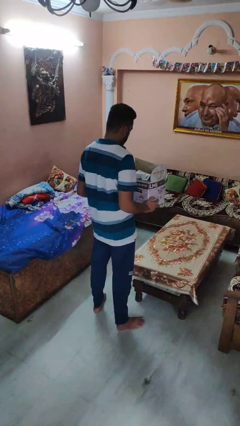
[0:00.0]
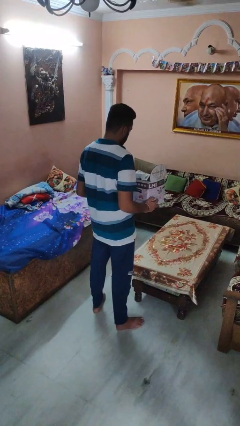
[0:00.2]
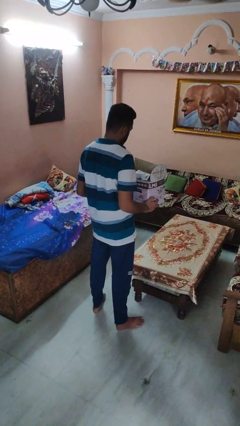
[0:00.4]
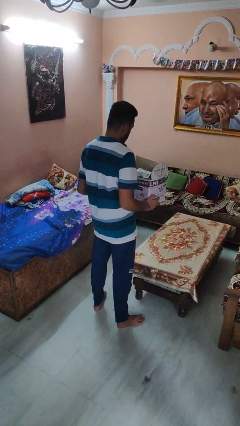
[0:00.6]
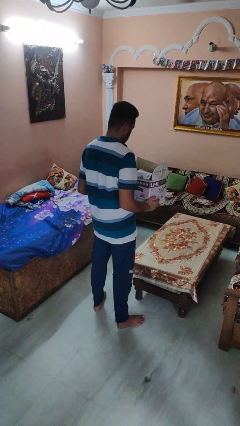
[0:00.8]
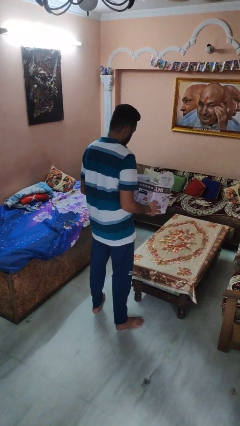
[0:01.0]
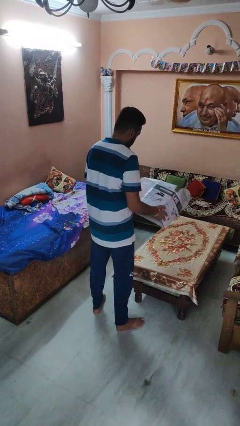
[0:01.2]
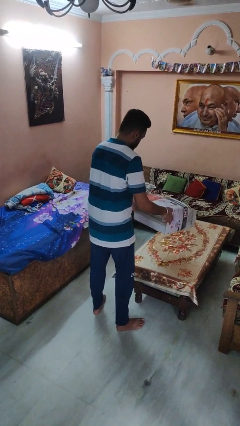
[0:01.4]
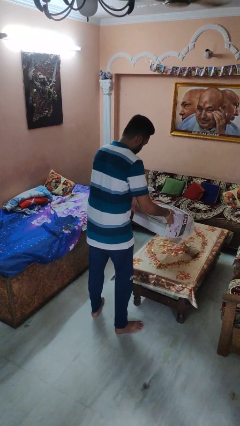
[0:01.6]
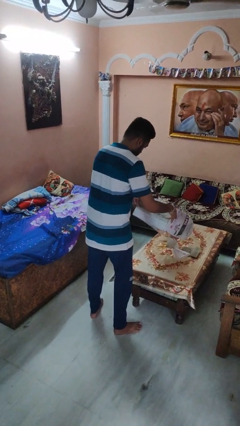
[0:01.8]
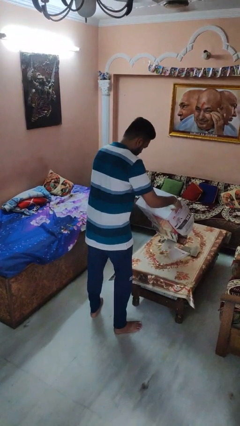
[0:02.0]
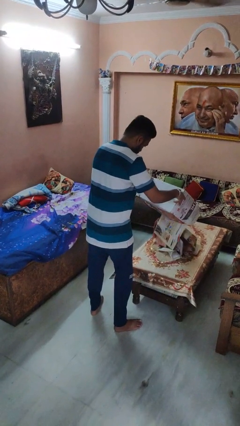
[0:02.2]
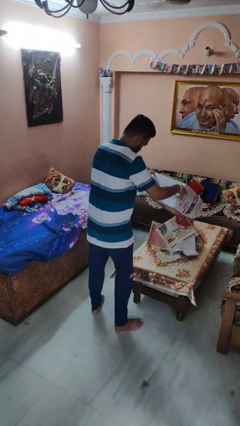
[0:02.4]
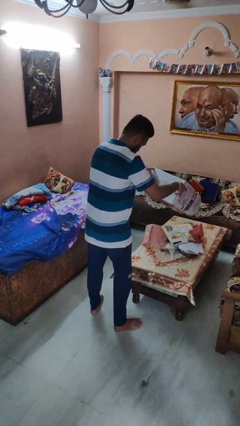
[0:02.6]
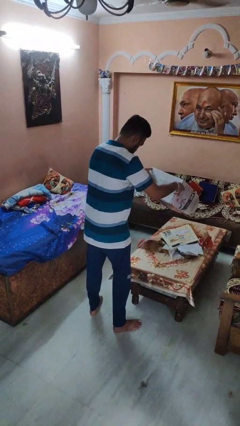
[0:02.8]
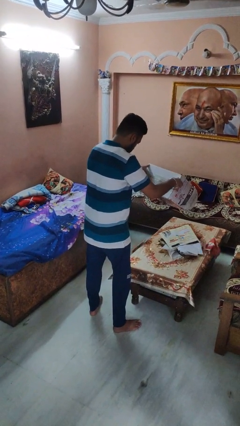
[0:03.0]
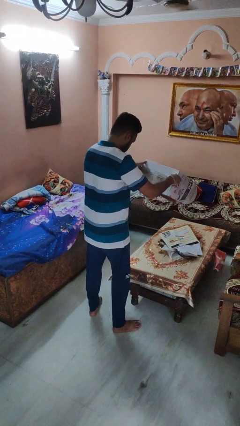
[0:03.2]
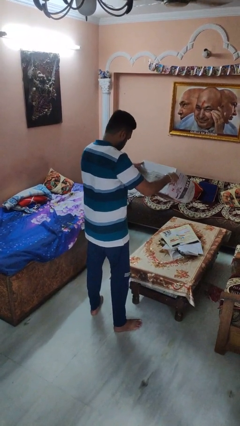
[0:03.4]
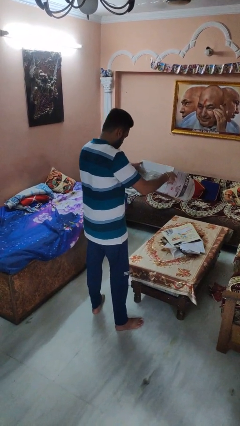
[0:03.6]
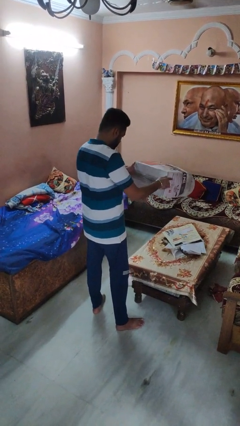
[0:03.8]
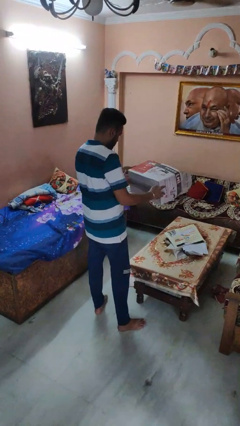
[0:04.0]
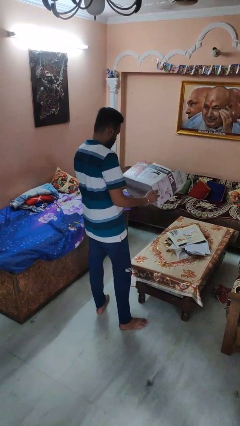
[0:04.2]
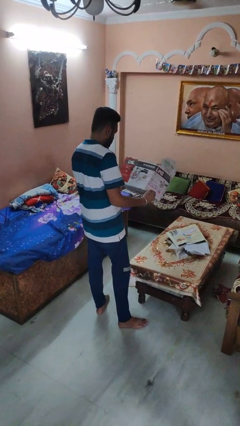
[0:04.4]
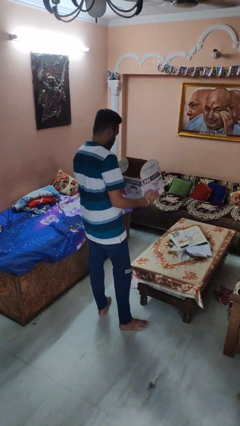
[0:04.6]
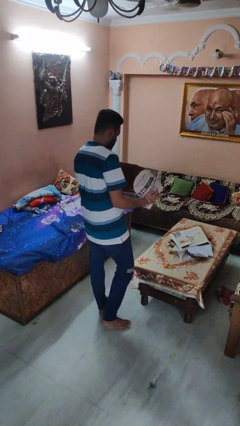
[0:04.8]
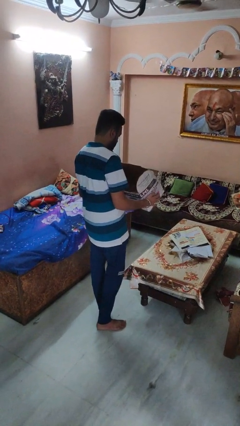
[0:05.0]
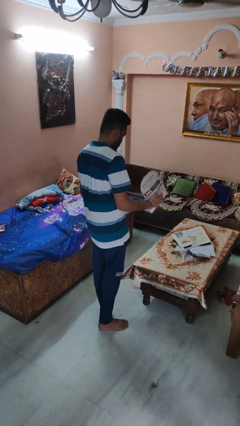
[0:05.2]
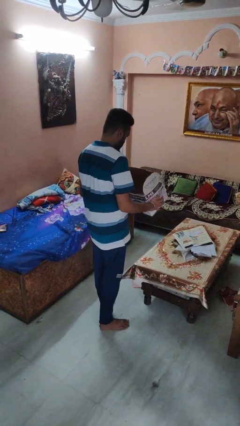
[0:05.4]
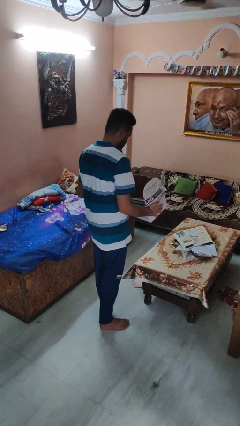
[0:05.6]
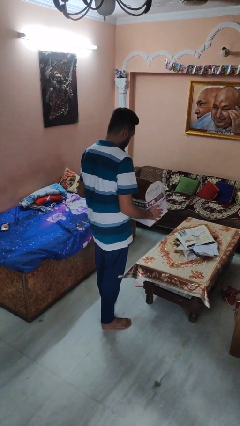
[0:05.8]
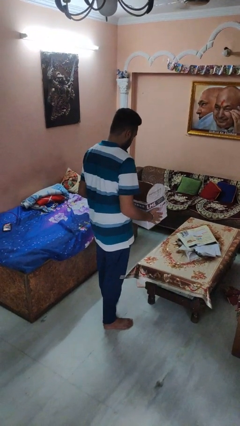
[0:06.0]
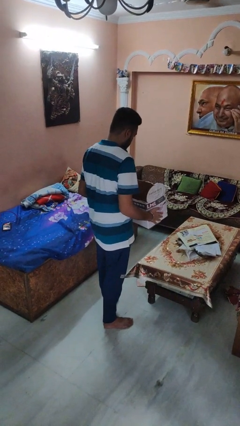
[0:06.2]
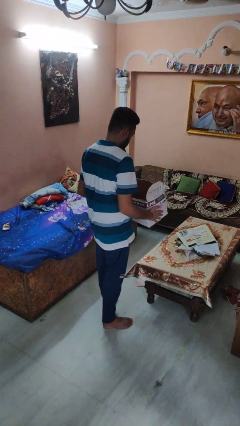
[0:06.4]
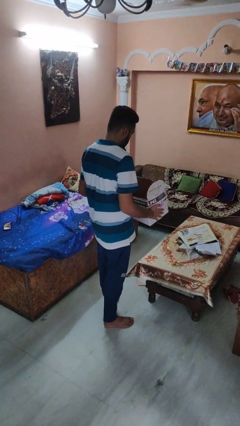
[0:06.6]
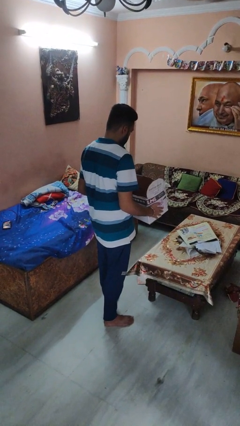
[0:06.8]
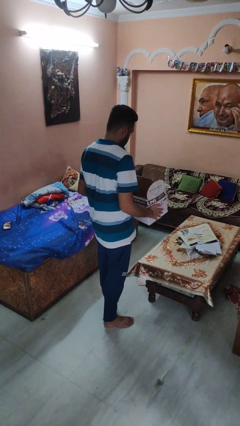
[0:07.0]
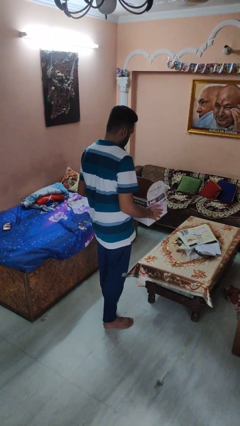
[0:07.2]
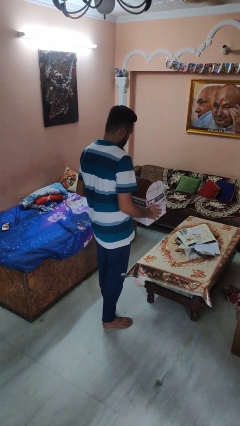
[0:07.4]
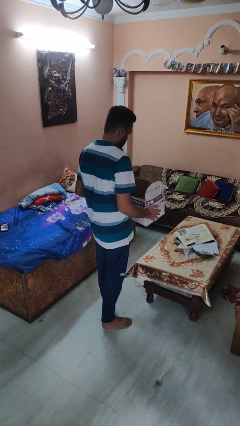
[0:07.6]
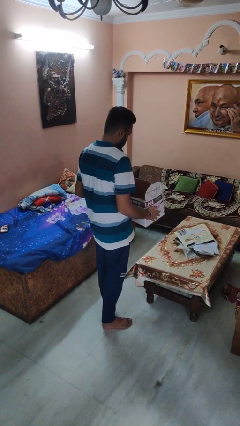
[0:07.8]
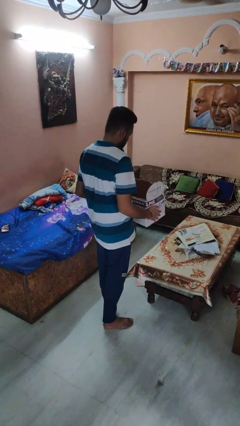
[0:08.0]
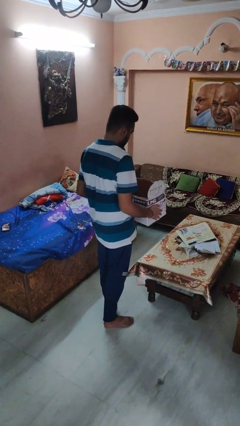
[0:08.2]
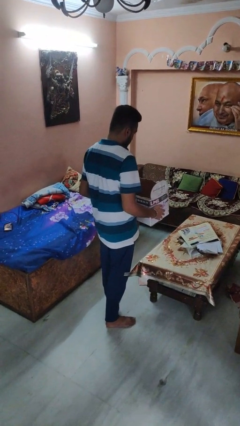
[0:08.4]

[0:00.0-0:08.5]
person unloads box onto table

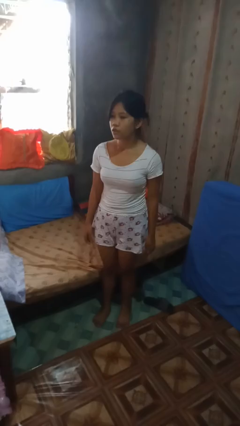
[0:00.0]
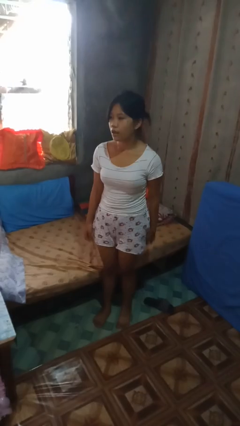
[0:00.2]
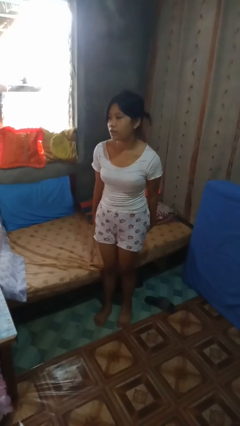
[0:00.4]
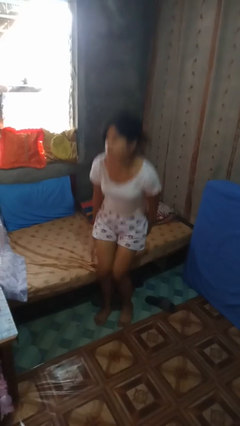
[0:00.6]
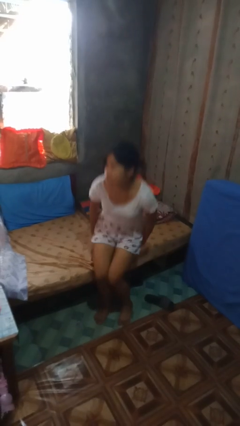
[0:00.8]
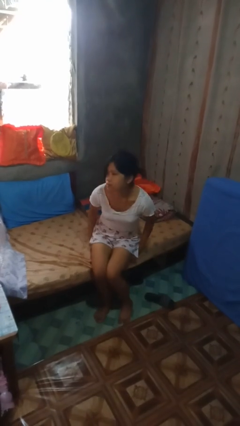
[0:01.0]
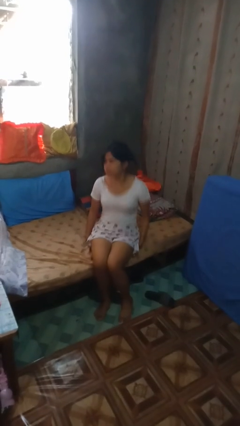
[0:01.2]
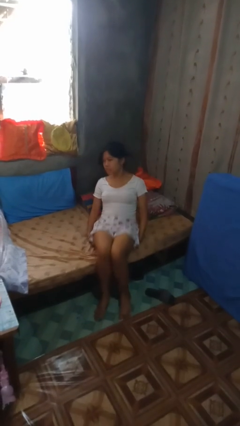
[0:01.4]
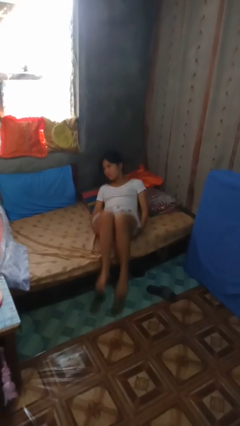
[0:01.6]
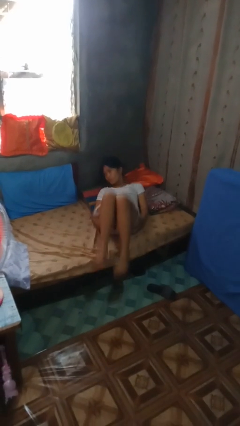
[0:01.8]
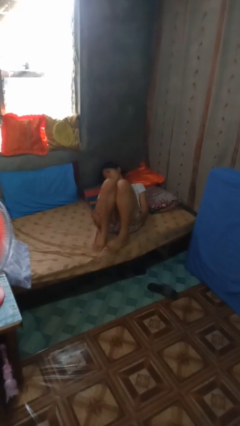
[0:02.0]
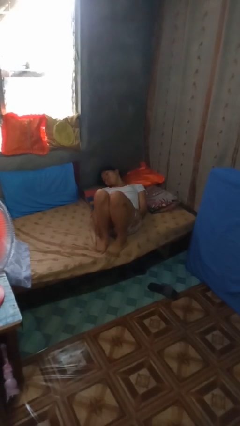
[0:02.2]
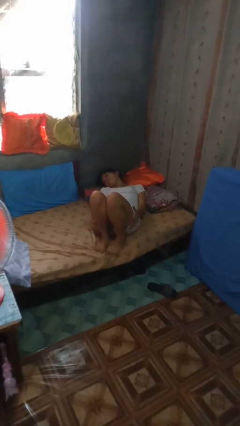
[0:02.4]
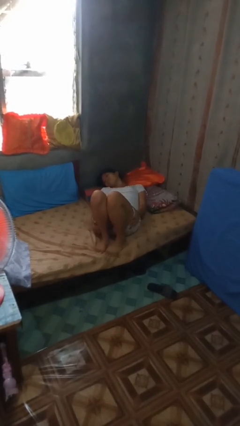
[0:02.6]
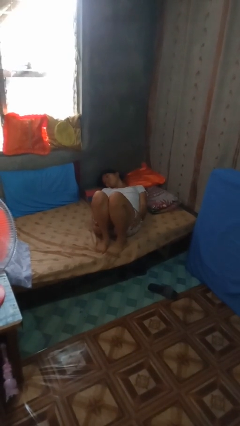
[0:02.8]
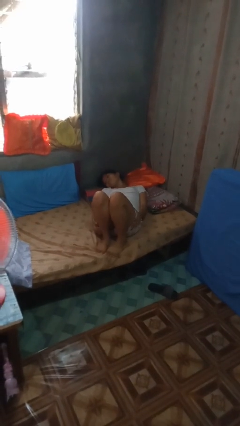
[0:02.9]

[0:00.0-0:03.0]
person lies down on bed

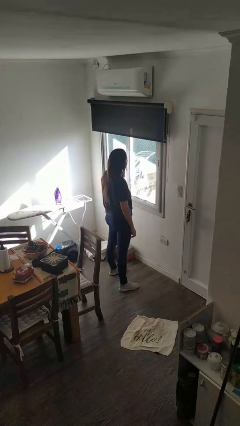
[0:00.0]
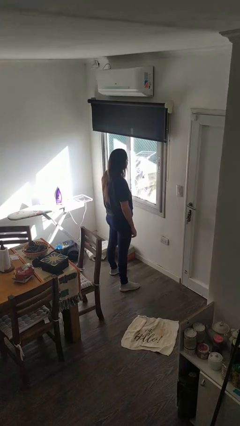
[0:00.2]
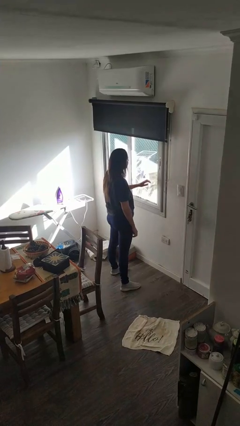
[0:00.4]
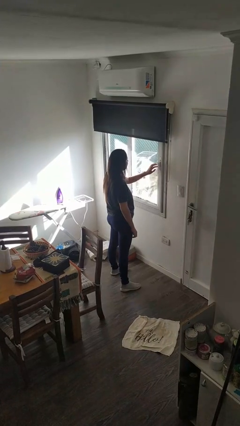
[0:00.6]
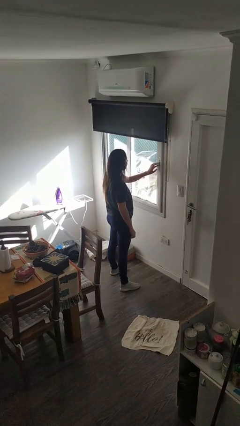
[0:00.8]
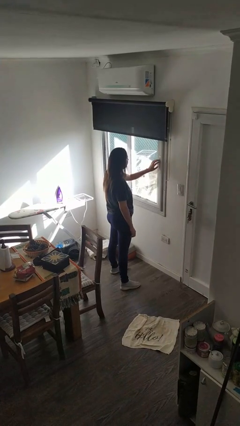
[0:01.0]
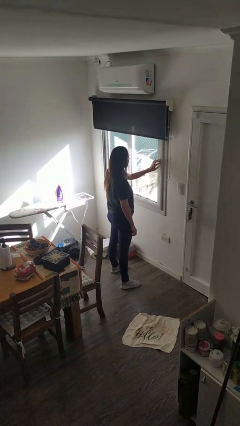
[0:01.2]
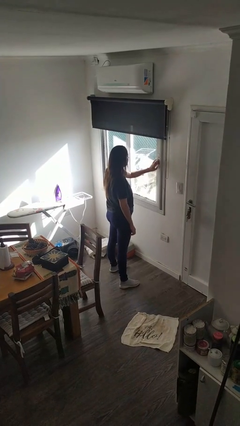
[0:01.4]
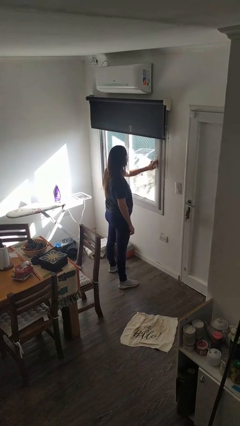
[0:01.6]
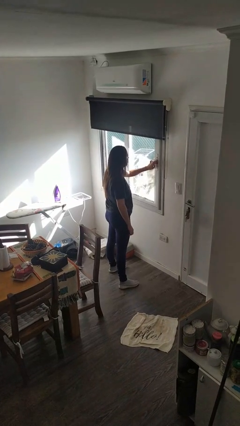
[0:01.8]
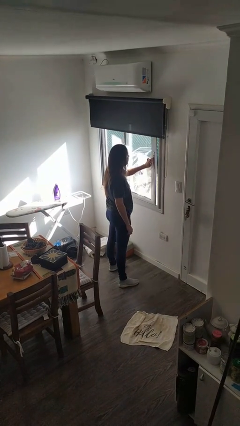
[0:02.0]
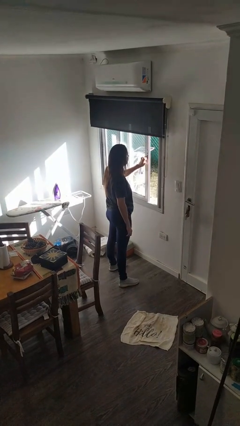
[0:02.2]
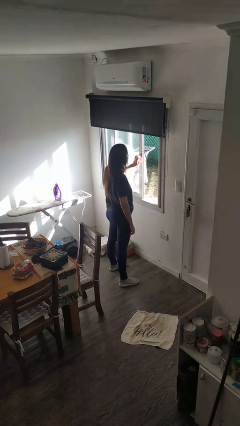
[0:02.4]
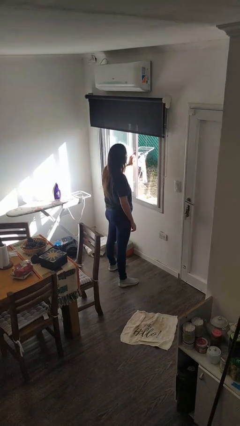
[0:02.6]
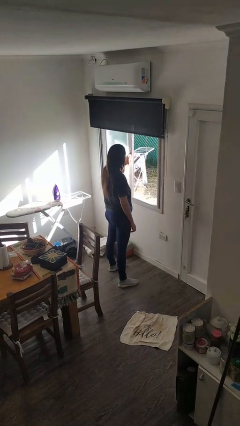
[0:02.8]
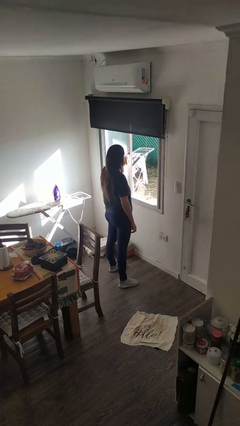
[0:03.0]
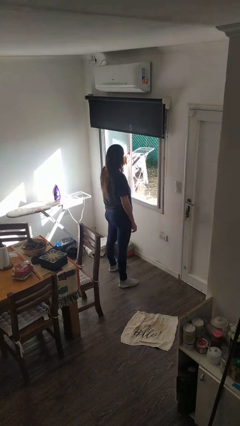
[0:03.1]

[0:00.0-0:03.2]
person opens home window

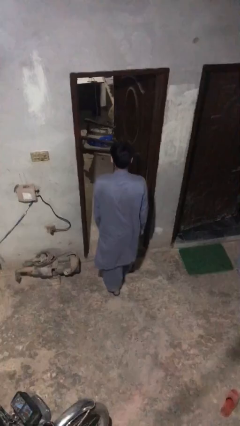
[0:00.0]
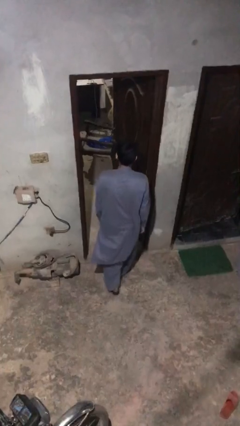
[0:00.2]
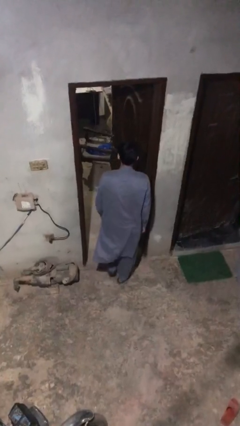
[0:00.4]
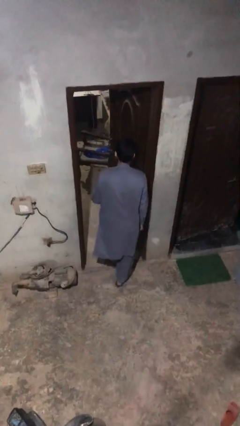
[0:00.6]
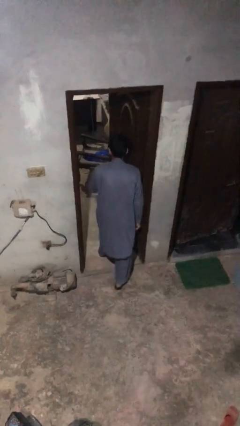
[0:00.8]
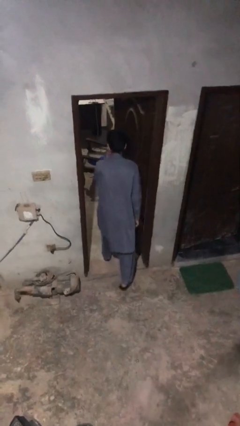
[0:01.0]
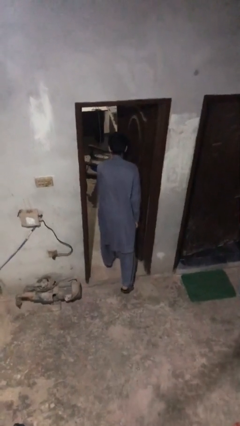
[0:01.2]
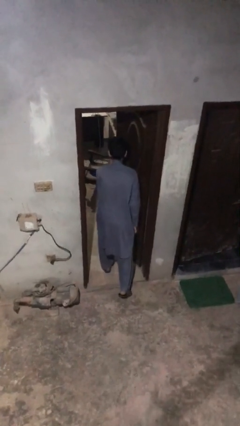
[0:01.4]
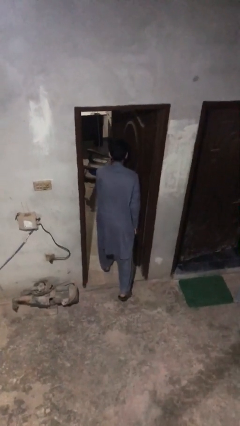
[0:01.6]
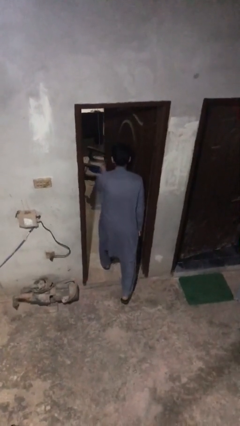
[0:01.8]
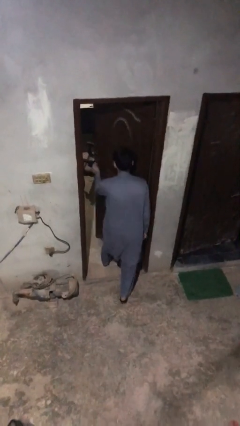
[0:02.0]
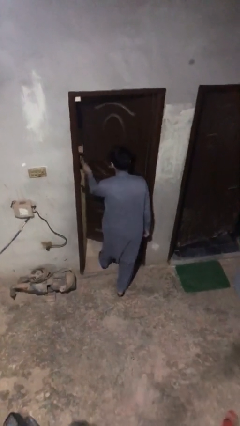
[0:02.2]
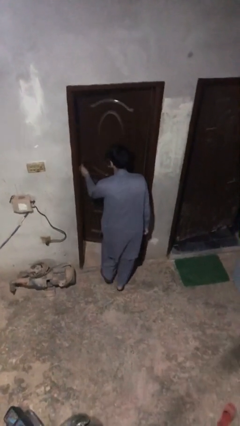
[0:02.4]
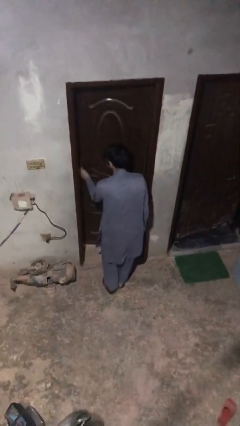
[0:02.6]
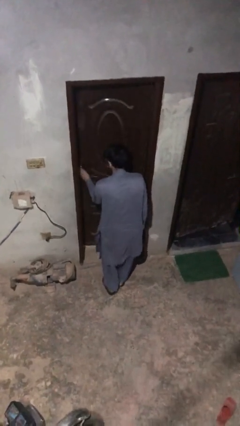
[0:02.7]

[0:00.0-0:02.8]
person closes facility door

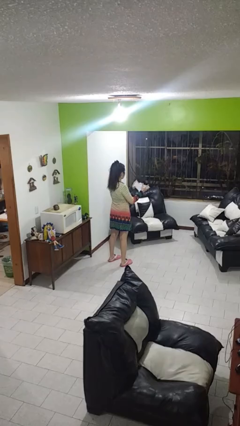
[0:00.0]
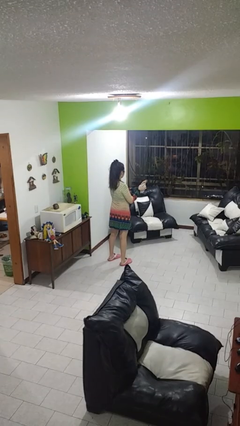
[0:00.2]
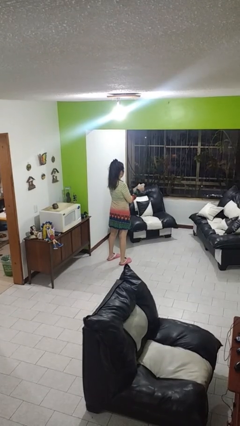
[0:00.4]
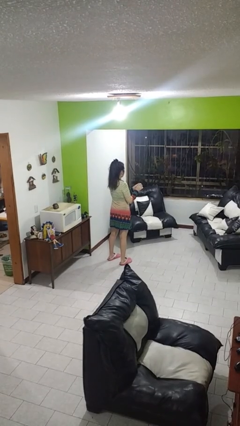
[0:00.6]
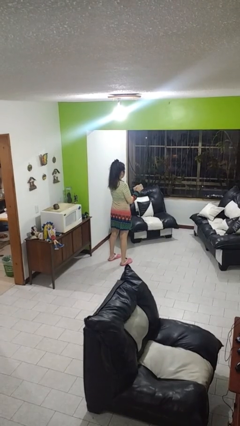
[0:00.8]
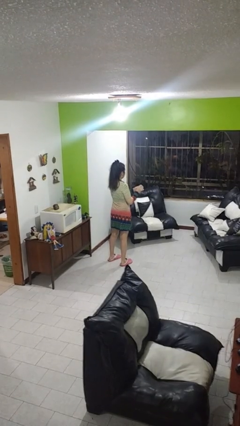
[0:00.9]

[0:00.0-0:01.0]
person crumples paper
